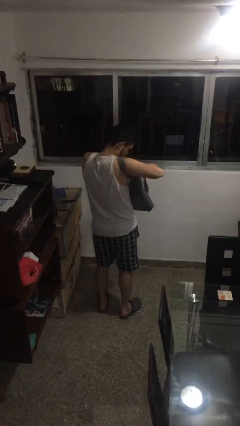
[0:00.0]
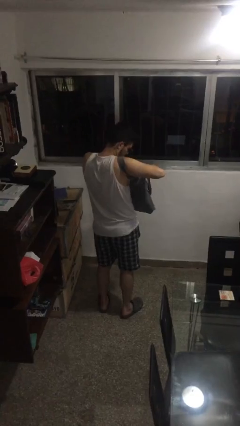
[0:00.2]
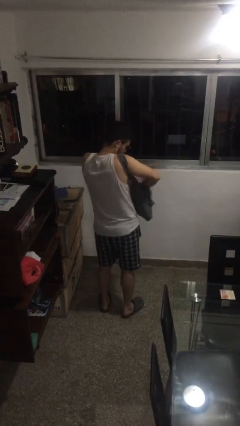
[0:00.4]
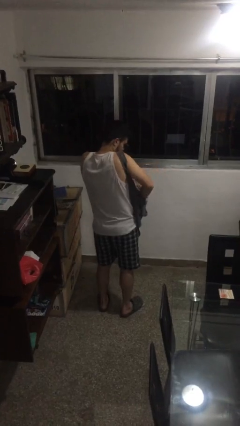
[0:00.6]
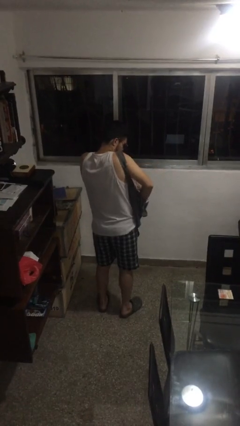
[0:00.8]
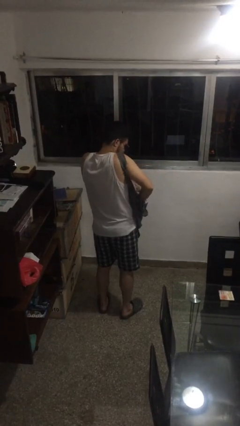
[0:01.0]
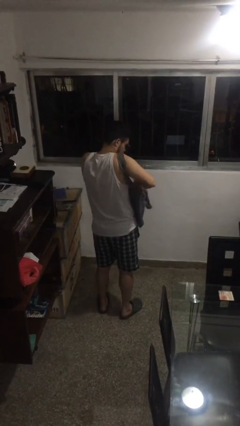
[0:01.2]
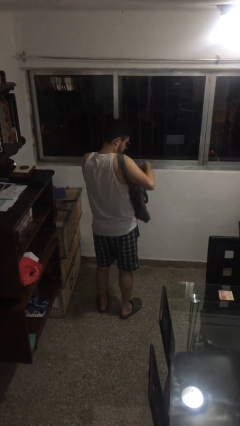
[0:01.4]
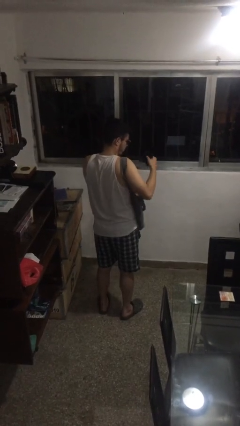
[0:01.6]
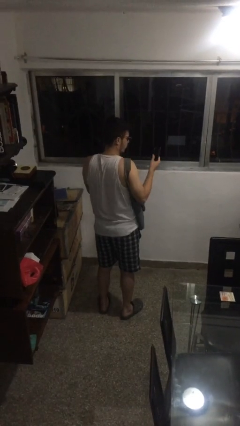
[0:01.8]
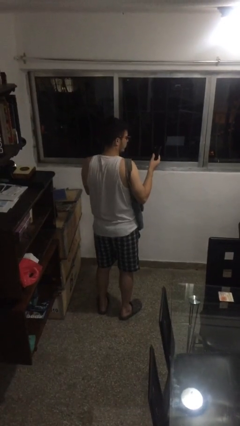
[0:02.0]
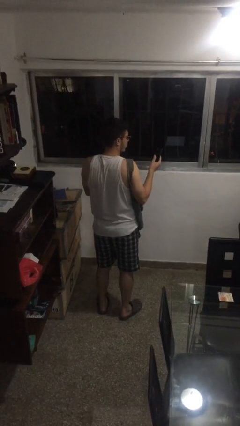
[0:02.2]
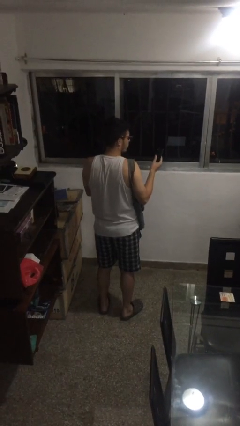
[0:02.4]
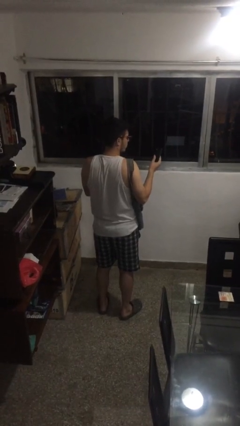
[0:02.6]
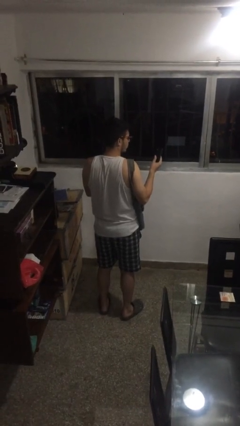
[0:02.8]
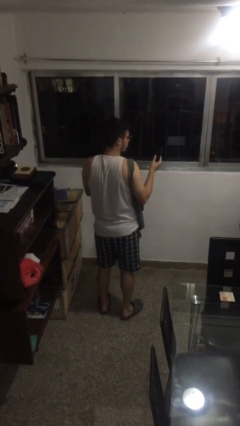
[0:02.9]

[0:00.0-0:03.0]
person takes object from purse

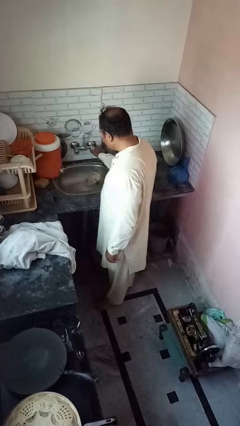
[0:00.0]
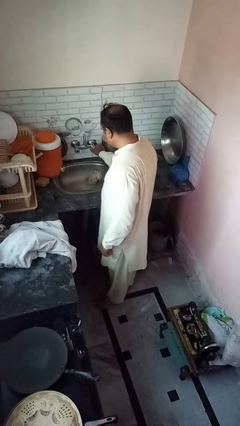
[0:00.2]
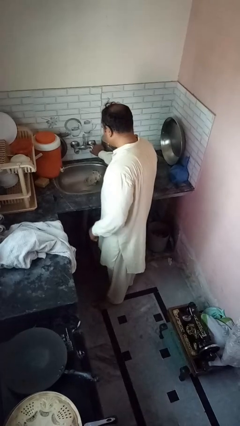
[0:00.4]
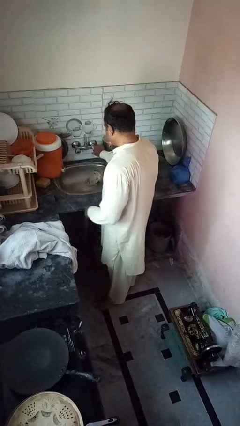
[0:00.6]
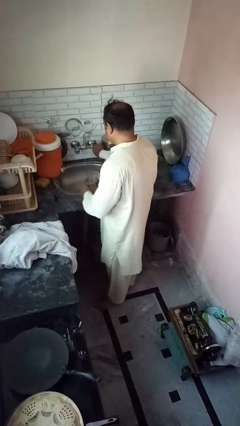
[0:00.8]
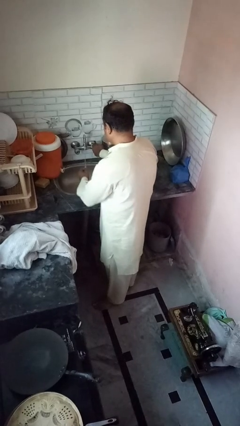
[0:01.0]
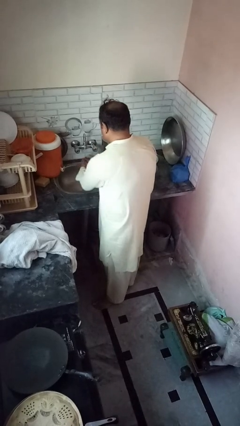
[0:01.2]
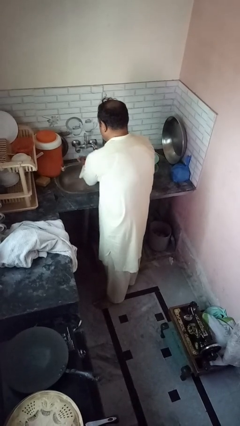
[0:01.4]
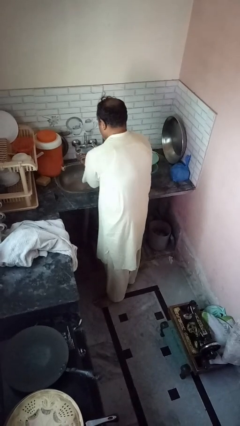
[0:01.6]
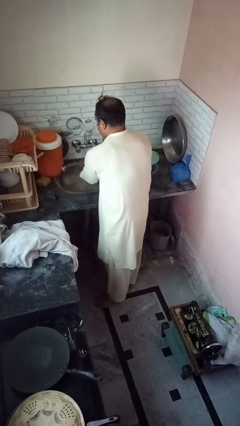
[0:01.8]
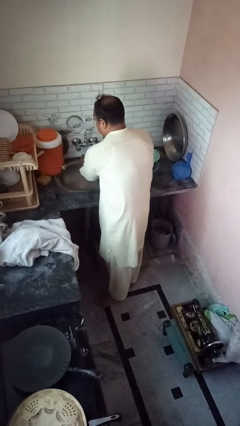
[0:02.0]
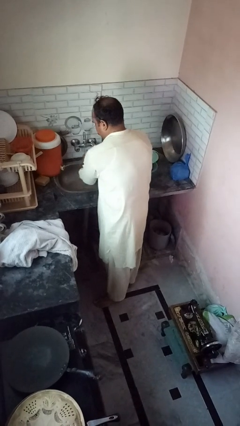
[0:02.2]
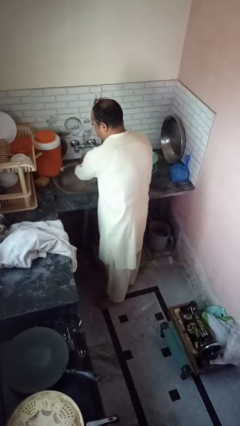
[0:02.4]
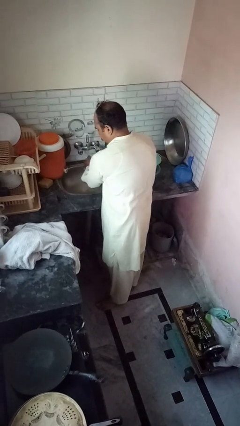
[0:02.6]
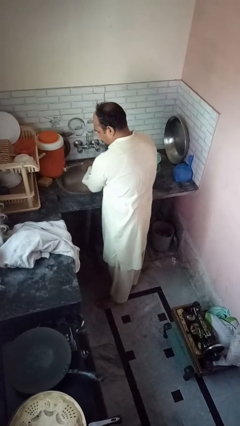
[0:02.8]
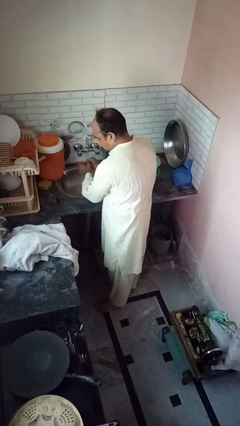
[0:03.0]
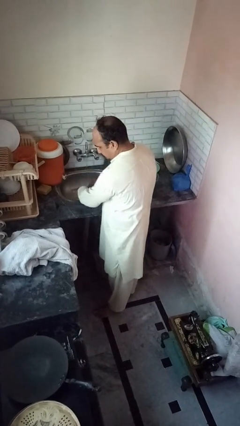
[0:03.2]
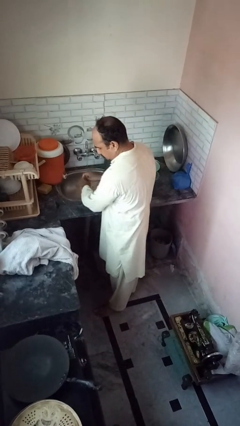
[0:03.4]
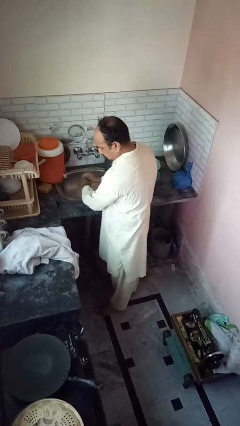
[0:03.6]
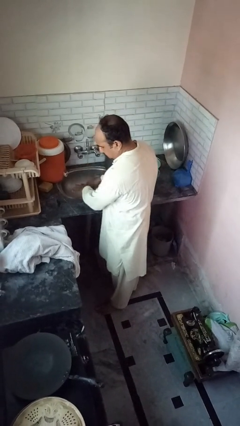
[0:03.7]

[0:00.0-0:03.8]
person washes hands

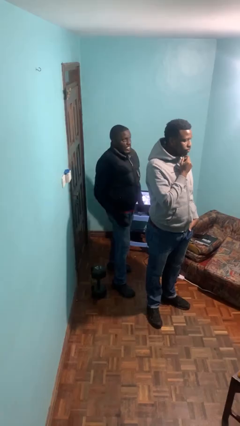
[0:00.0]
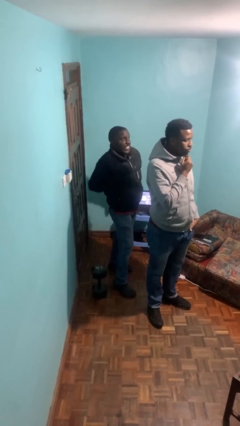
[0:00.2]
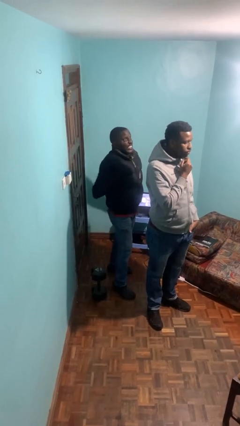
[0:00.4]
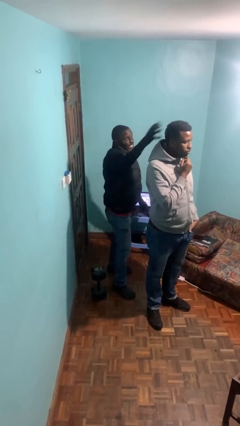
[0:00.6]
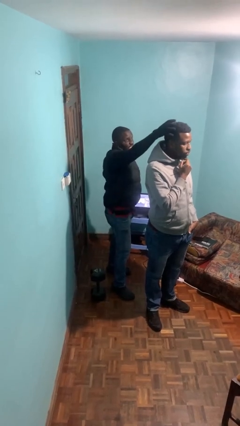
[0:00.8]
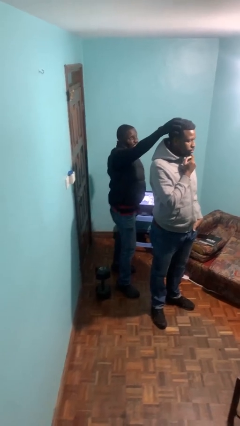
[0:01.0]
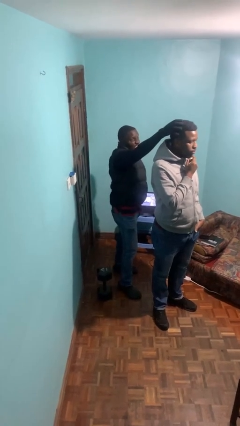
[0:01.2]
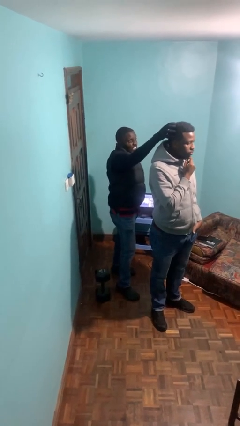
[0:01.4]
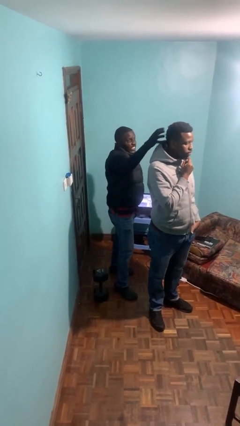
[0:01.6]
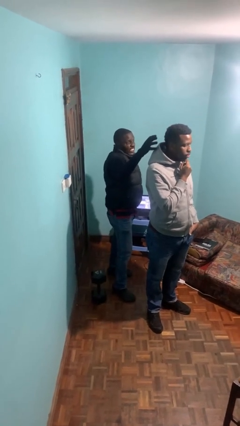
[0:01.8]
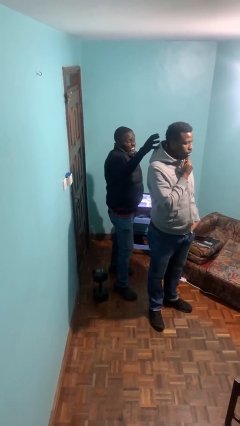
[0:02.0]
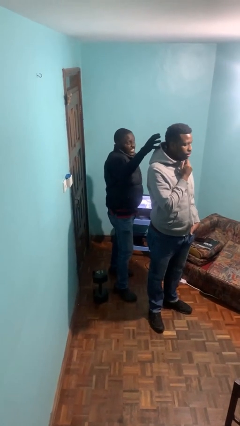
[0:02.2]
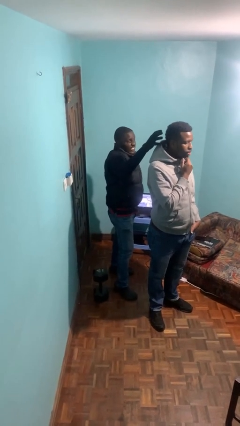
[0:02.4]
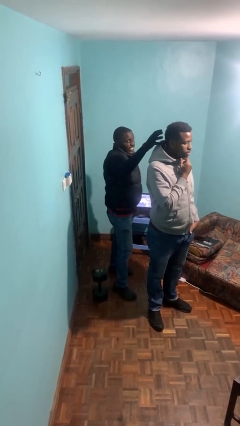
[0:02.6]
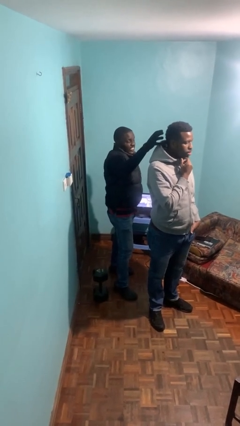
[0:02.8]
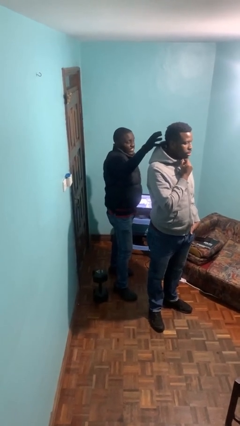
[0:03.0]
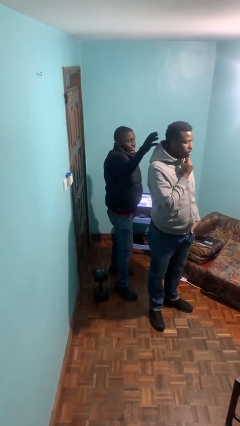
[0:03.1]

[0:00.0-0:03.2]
person grabs person by hair

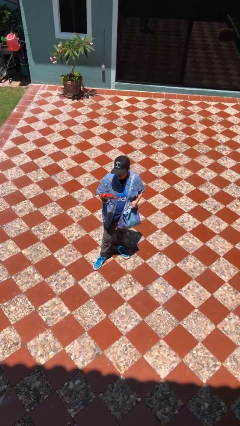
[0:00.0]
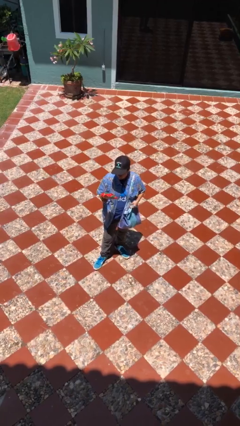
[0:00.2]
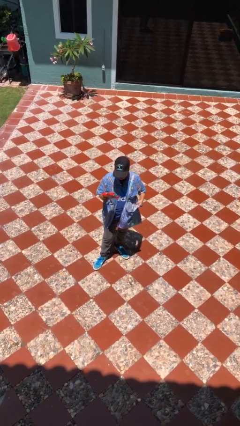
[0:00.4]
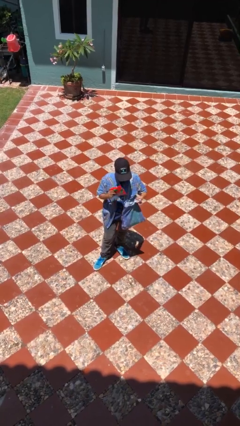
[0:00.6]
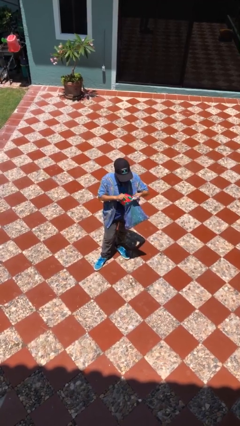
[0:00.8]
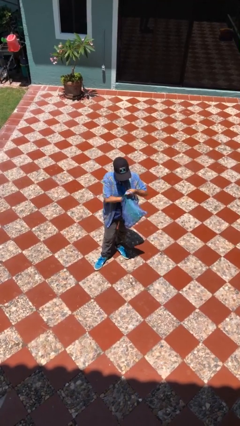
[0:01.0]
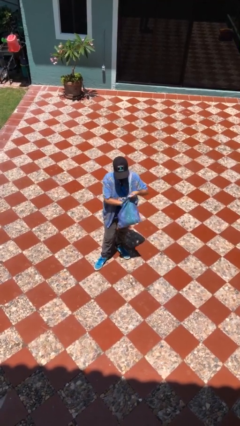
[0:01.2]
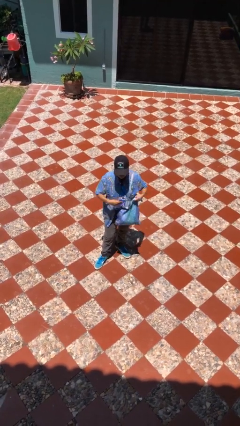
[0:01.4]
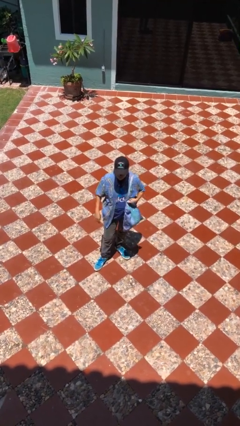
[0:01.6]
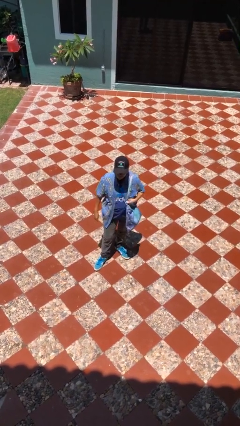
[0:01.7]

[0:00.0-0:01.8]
person puts object into purse

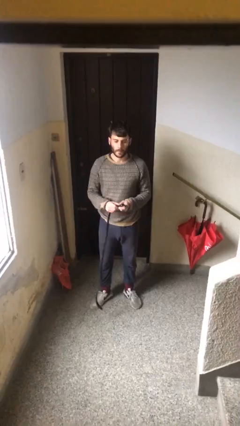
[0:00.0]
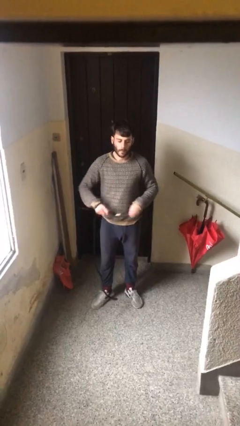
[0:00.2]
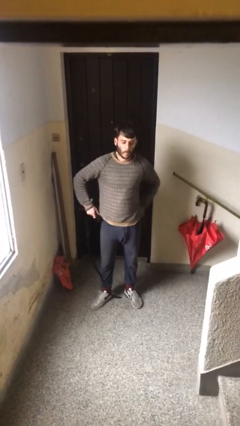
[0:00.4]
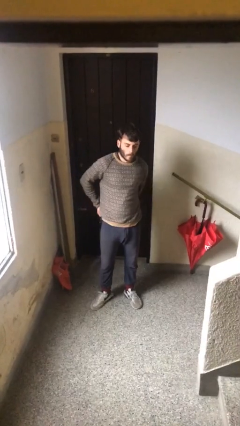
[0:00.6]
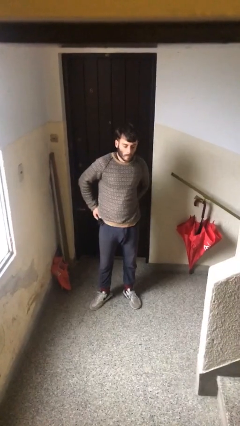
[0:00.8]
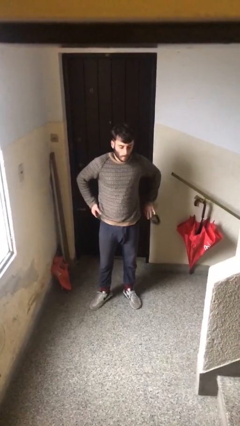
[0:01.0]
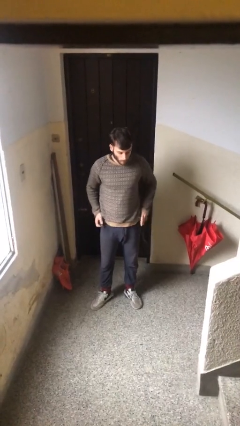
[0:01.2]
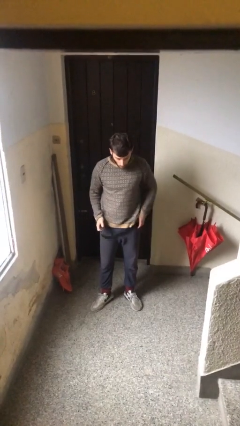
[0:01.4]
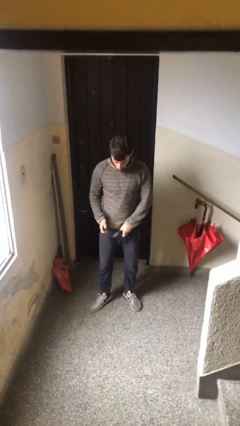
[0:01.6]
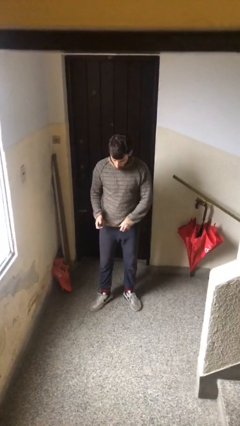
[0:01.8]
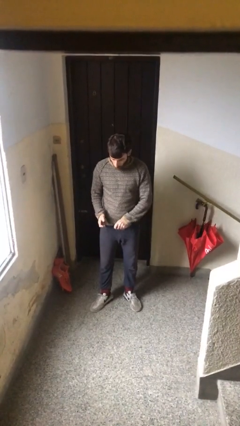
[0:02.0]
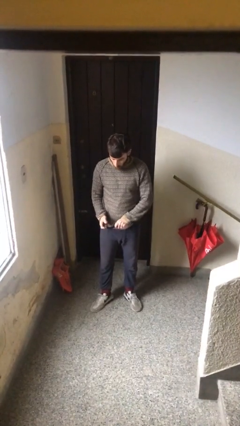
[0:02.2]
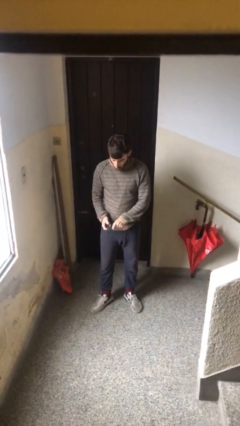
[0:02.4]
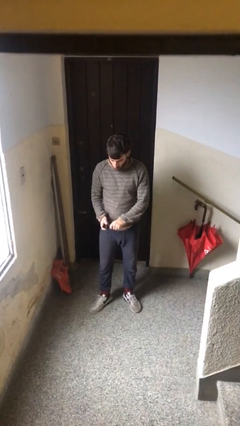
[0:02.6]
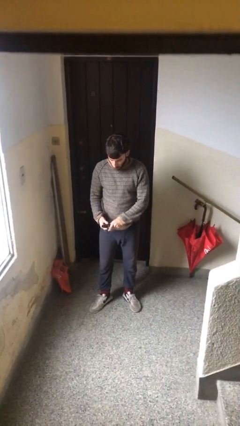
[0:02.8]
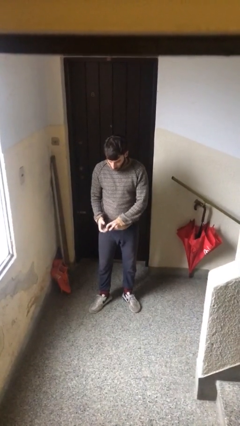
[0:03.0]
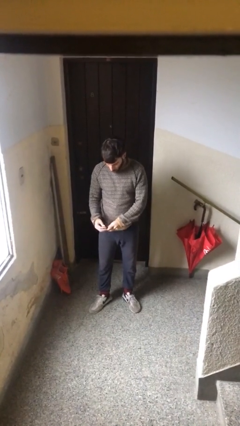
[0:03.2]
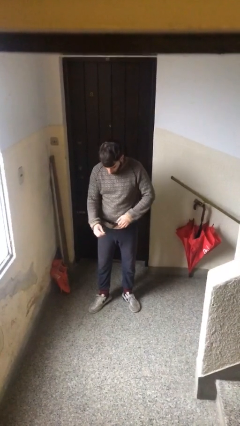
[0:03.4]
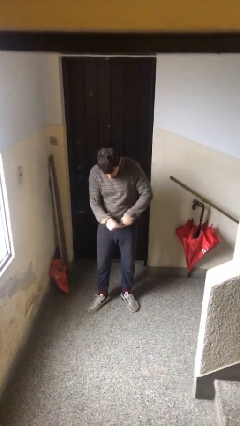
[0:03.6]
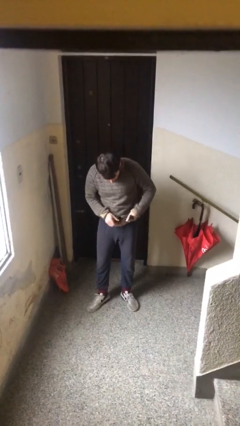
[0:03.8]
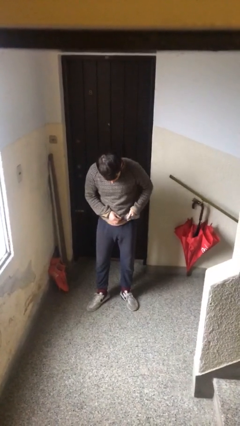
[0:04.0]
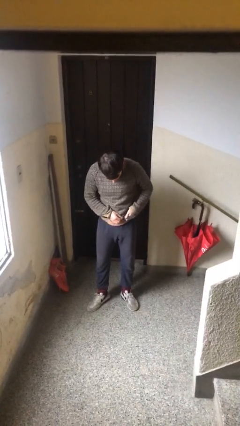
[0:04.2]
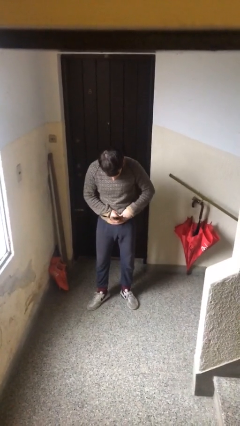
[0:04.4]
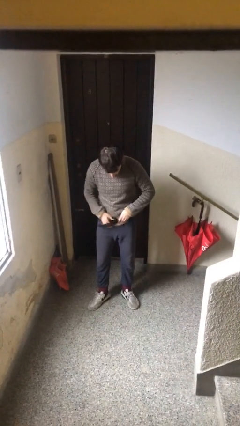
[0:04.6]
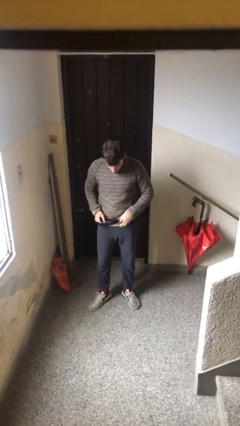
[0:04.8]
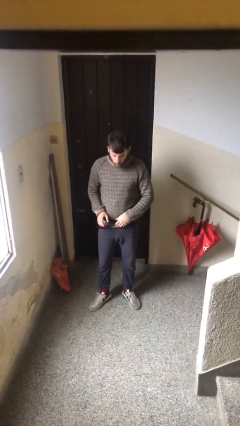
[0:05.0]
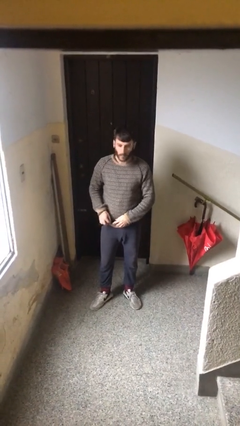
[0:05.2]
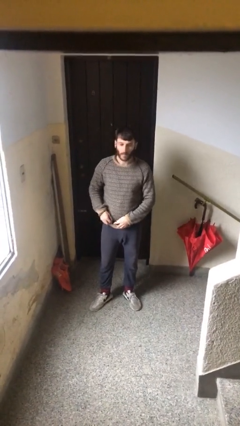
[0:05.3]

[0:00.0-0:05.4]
person puts on belt

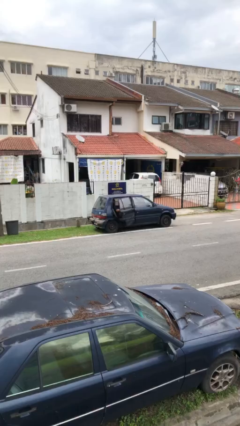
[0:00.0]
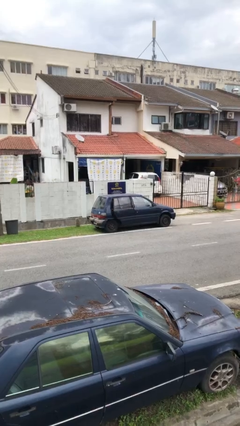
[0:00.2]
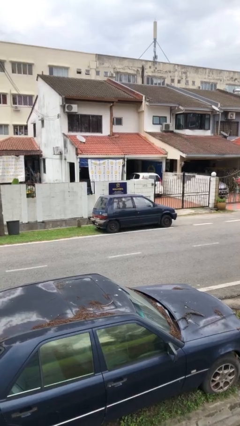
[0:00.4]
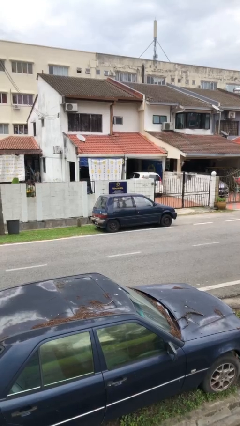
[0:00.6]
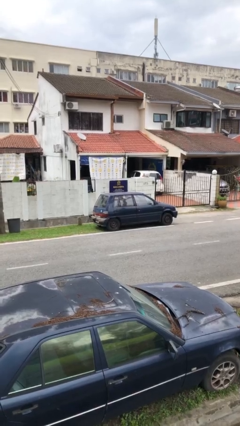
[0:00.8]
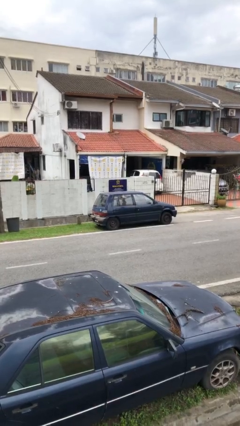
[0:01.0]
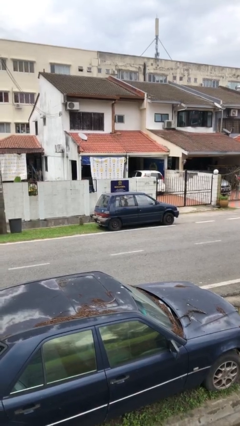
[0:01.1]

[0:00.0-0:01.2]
person closes car door
